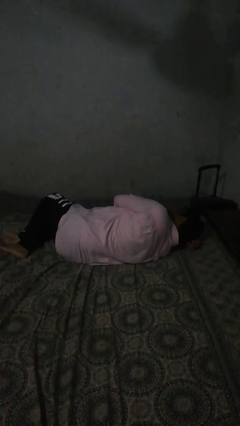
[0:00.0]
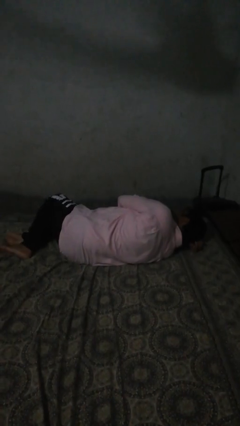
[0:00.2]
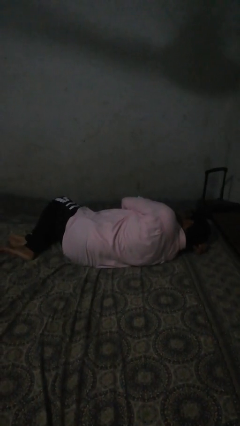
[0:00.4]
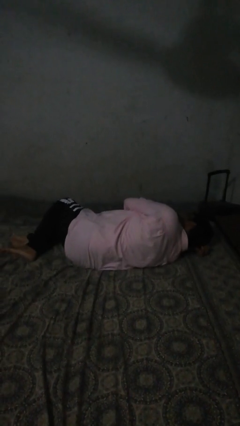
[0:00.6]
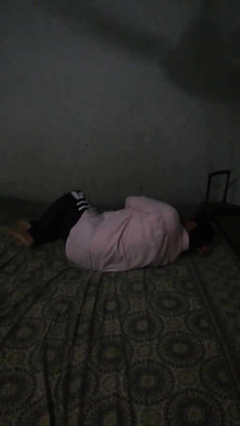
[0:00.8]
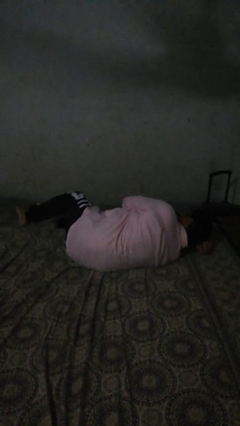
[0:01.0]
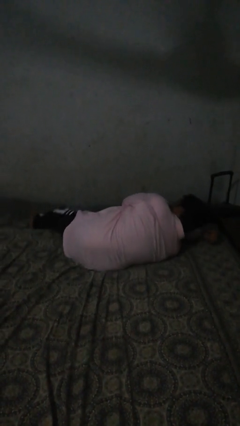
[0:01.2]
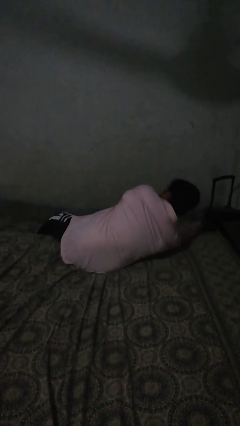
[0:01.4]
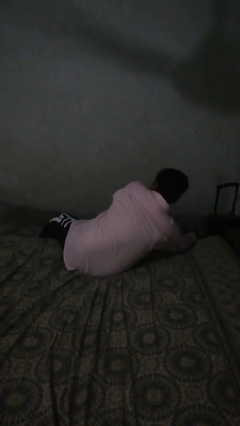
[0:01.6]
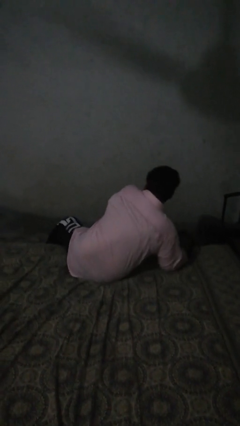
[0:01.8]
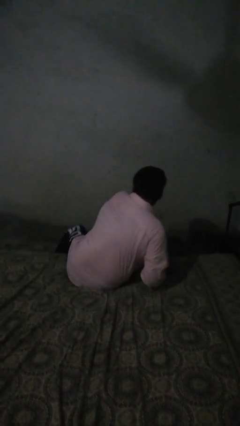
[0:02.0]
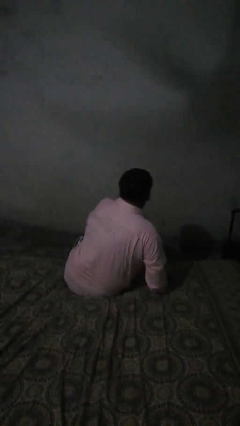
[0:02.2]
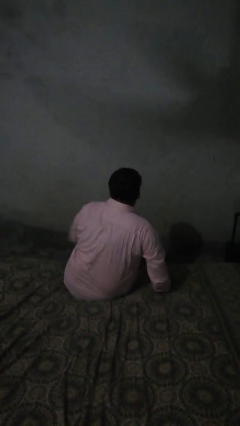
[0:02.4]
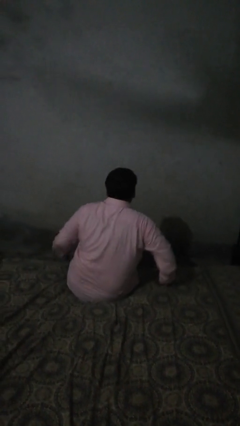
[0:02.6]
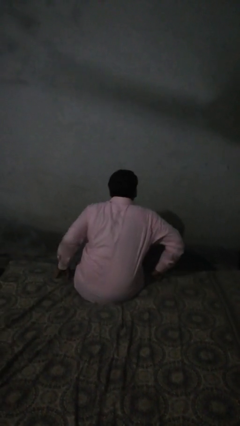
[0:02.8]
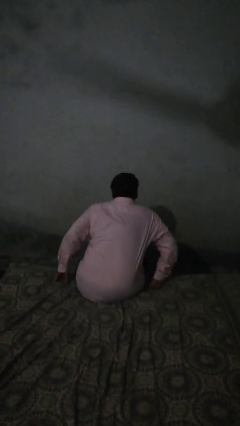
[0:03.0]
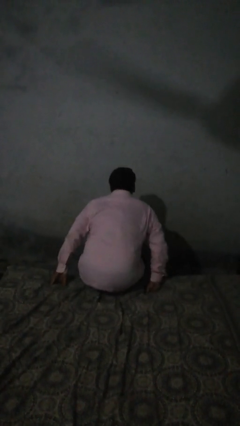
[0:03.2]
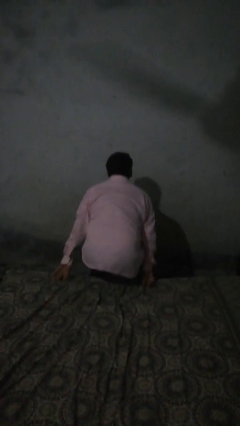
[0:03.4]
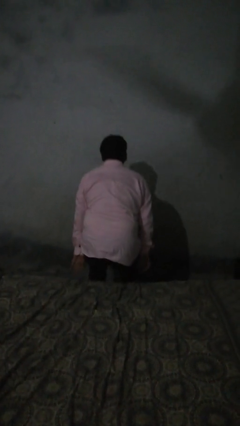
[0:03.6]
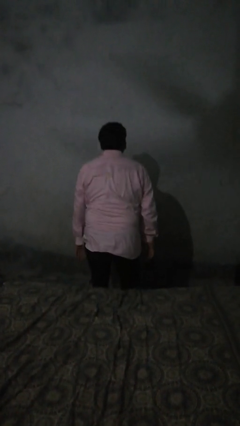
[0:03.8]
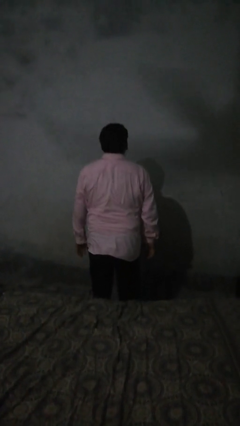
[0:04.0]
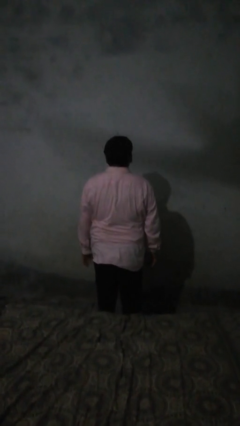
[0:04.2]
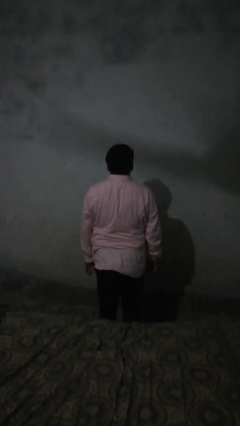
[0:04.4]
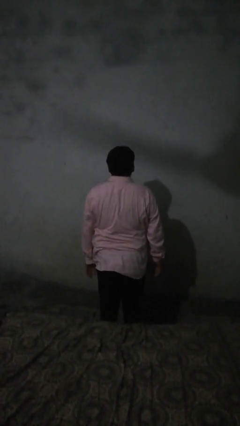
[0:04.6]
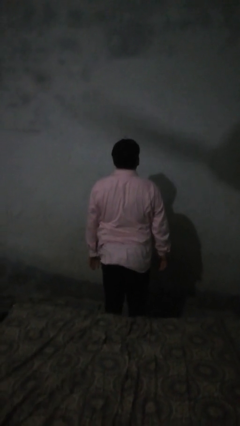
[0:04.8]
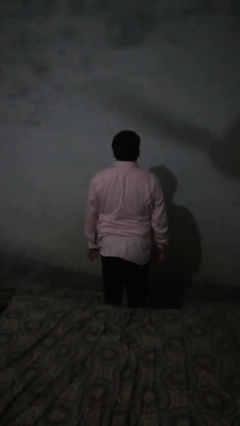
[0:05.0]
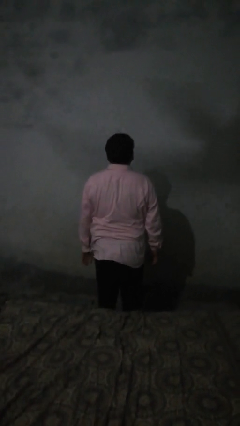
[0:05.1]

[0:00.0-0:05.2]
person stands up

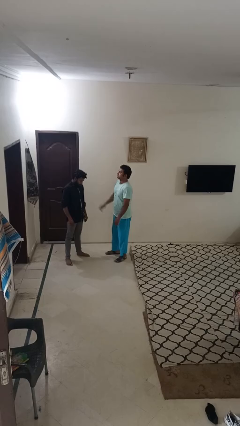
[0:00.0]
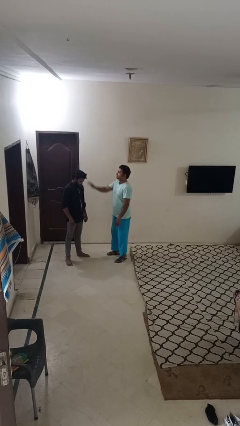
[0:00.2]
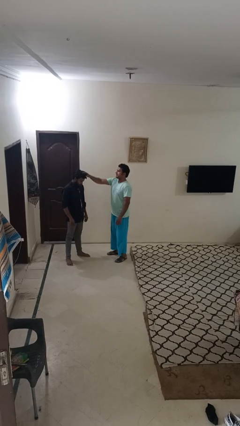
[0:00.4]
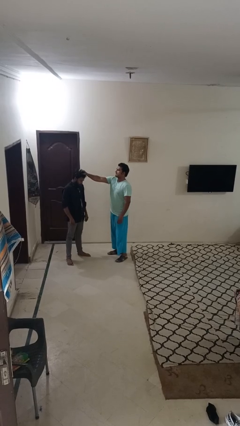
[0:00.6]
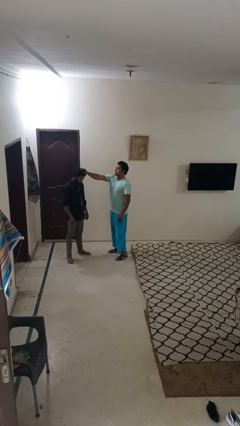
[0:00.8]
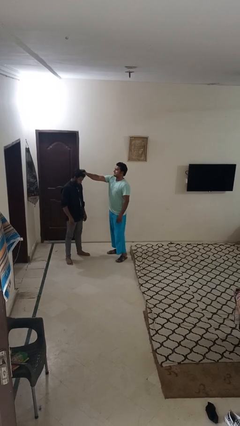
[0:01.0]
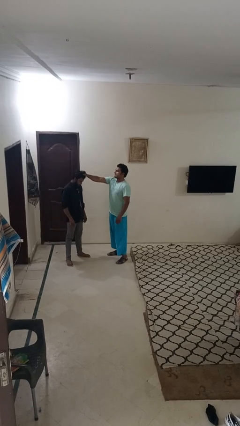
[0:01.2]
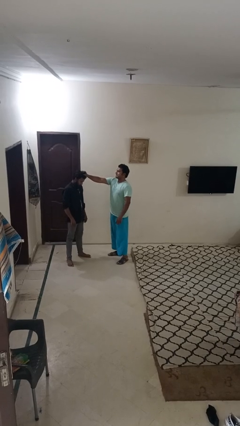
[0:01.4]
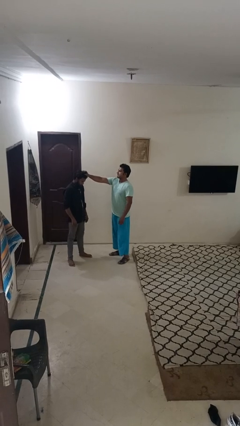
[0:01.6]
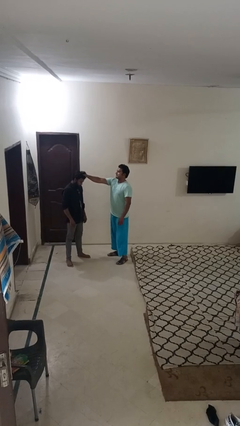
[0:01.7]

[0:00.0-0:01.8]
person grabs person by hair

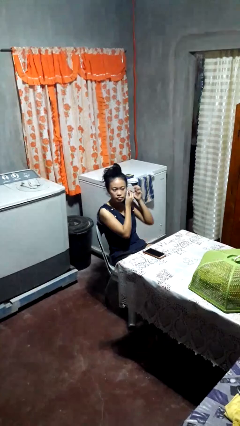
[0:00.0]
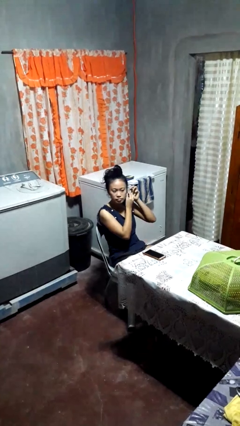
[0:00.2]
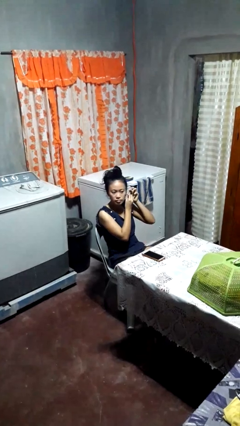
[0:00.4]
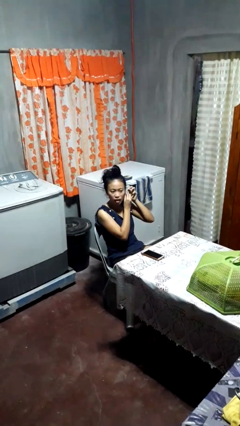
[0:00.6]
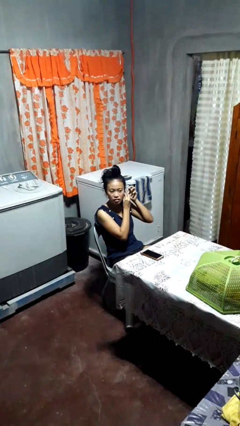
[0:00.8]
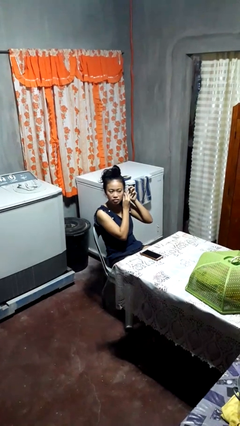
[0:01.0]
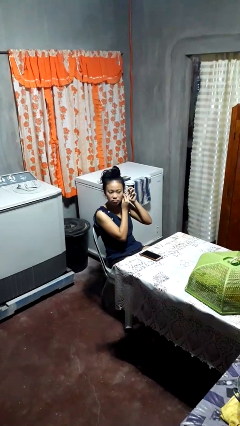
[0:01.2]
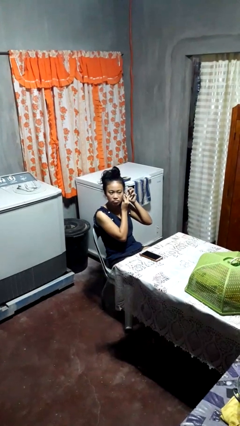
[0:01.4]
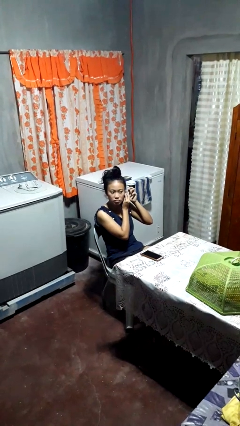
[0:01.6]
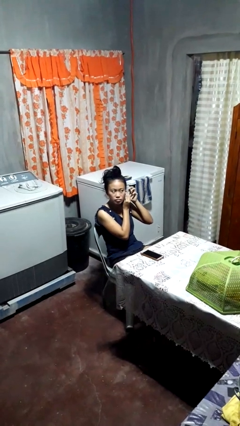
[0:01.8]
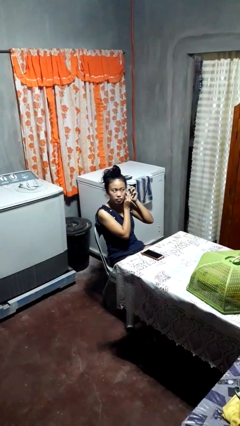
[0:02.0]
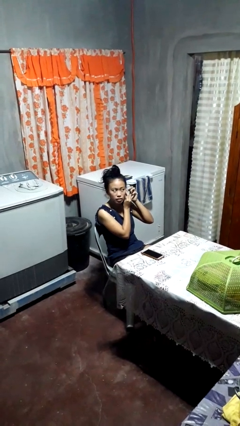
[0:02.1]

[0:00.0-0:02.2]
person puts on earrings

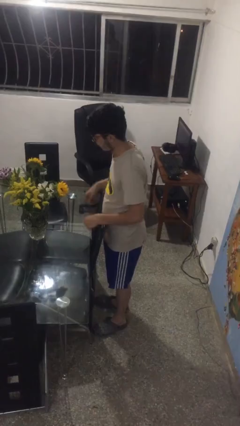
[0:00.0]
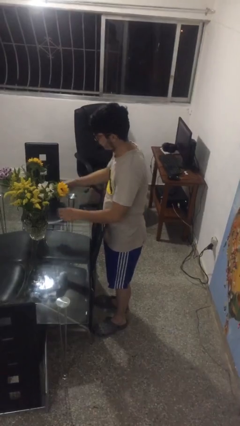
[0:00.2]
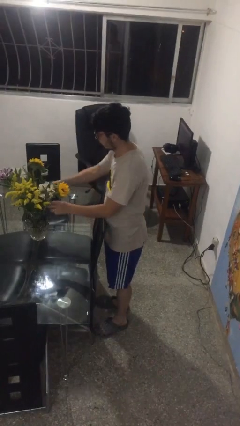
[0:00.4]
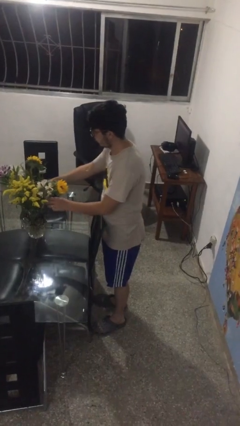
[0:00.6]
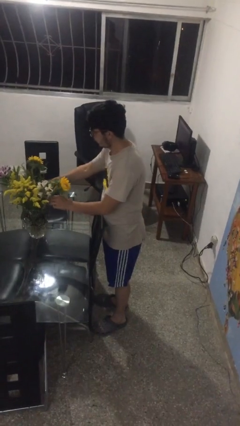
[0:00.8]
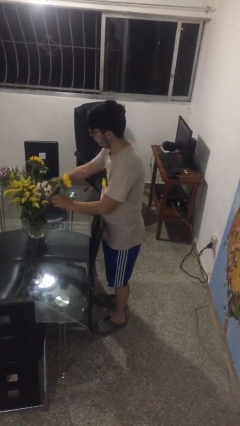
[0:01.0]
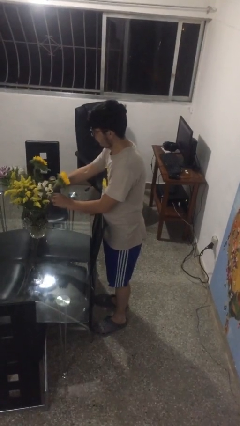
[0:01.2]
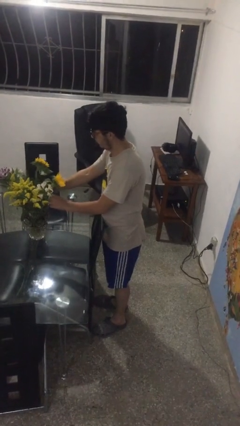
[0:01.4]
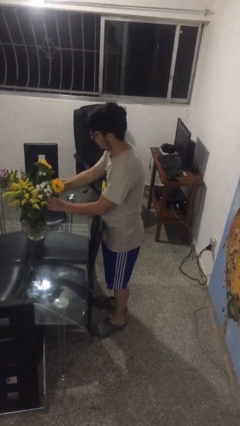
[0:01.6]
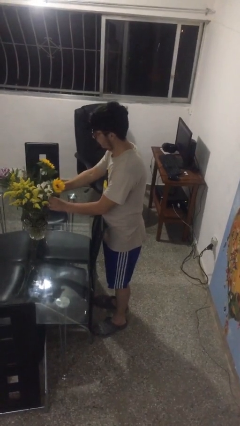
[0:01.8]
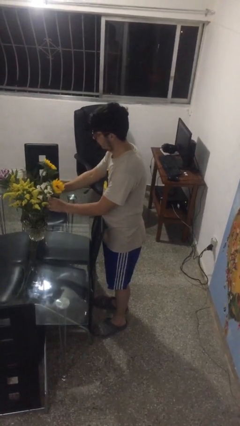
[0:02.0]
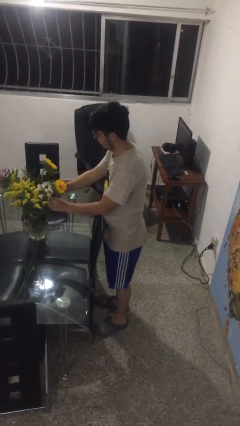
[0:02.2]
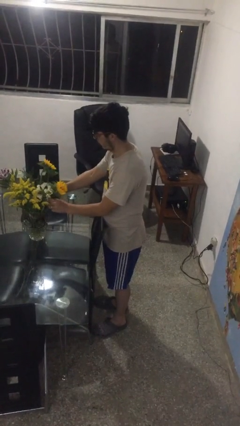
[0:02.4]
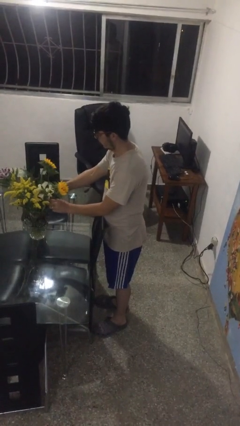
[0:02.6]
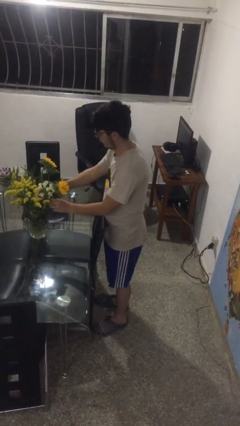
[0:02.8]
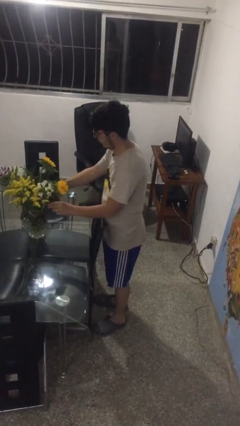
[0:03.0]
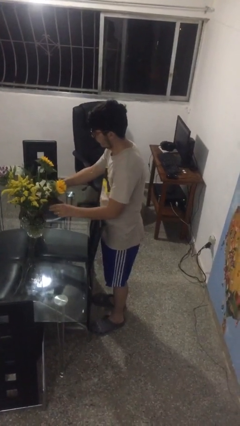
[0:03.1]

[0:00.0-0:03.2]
person arranges flowers in vase

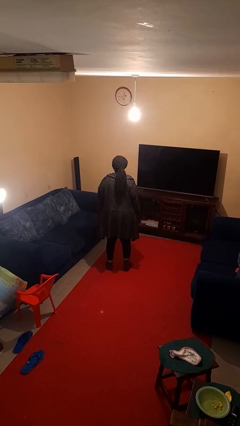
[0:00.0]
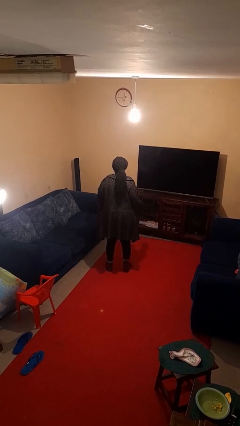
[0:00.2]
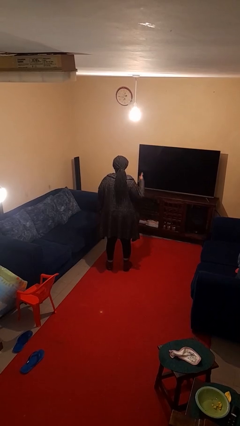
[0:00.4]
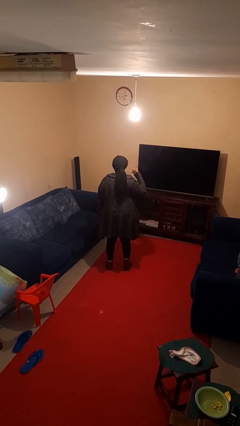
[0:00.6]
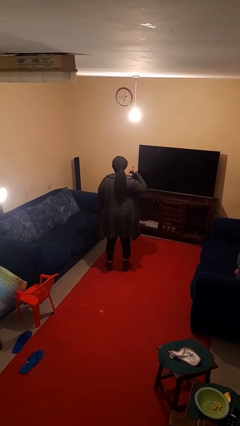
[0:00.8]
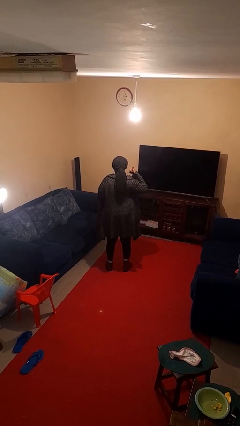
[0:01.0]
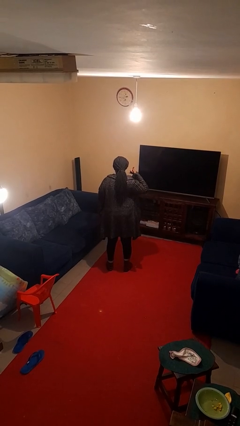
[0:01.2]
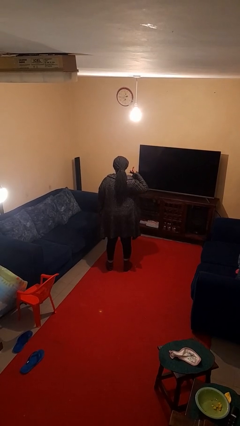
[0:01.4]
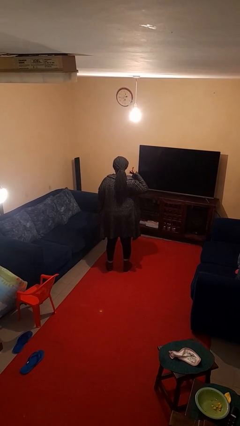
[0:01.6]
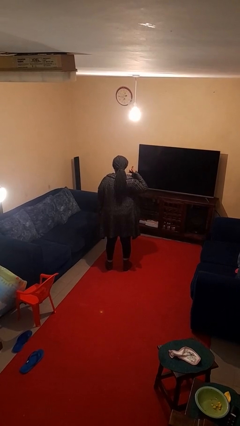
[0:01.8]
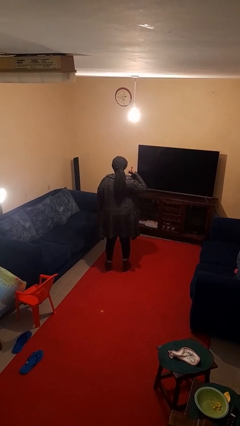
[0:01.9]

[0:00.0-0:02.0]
person gestures call me

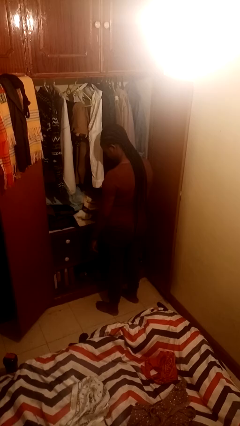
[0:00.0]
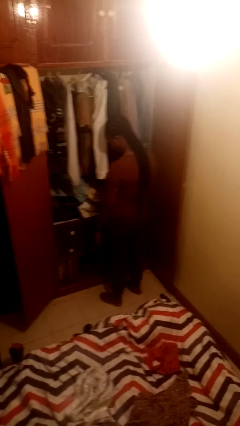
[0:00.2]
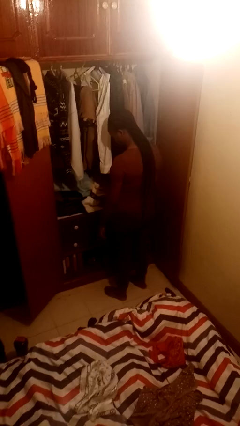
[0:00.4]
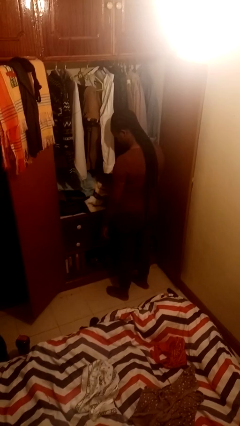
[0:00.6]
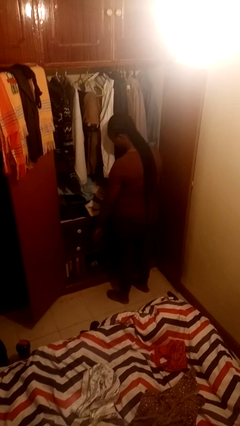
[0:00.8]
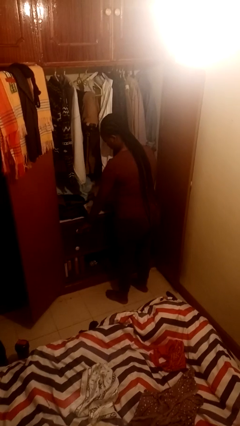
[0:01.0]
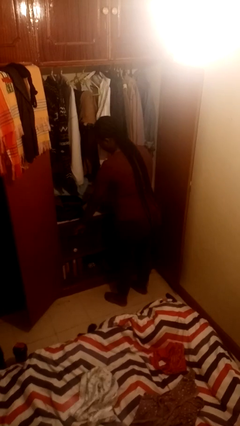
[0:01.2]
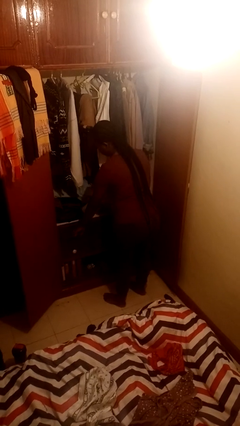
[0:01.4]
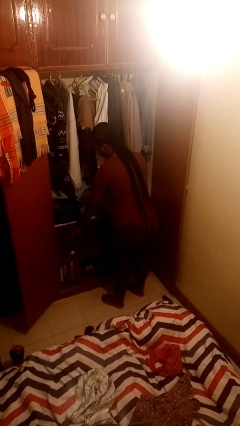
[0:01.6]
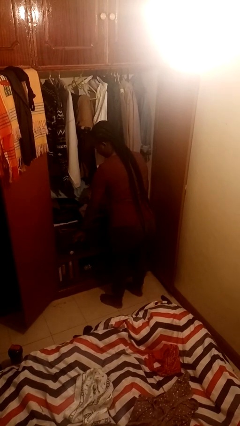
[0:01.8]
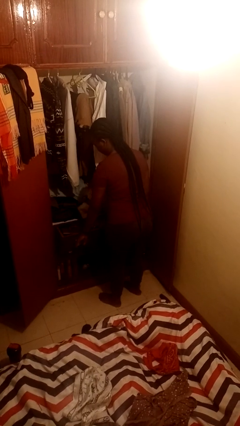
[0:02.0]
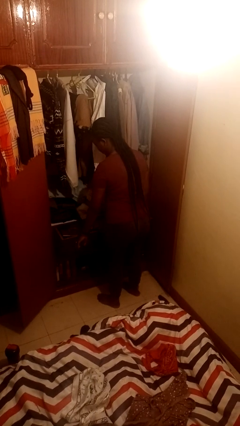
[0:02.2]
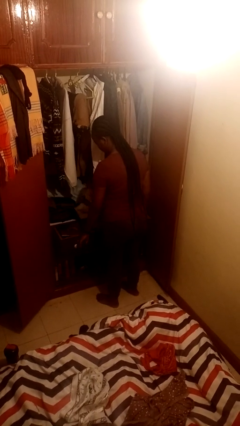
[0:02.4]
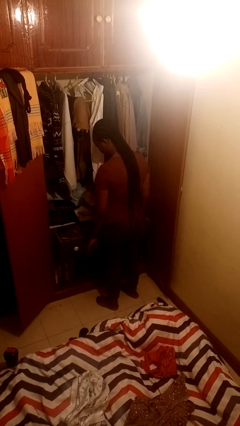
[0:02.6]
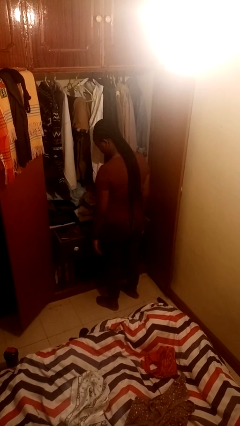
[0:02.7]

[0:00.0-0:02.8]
person opens dresser drawer
